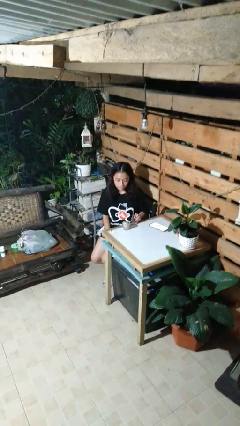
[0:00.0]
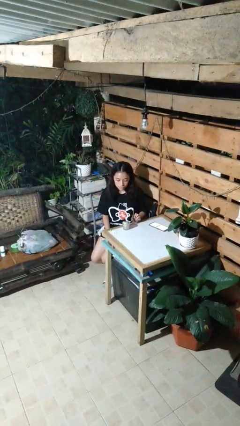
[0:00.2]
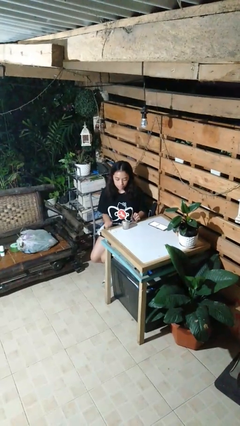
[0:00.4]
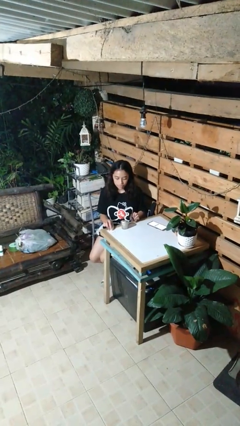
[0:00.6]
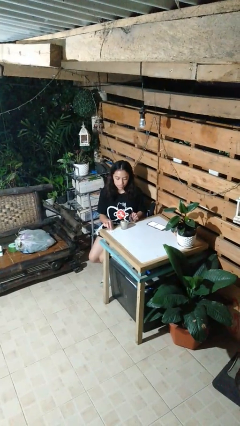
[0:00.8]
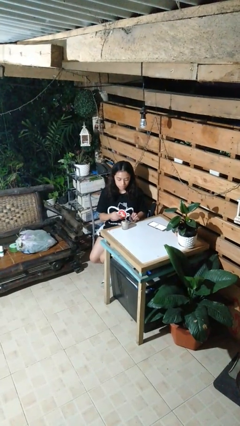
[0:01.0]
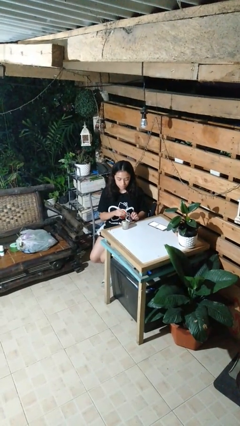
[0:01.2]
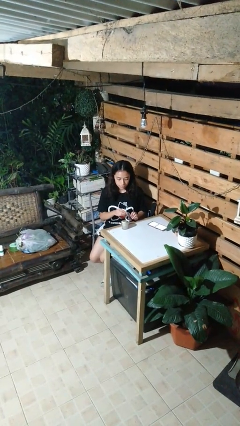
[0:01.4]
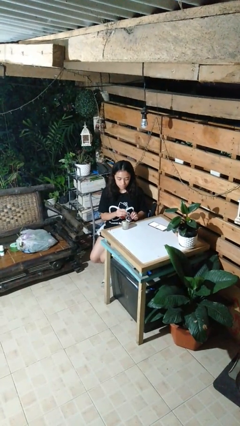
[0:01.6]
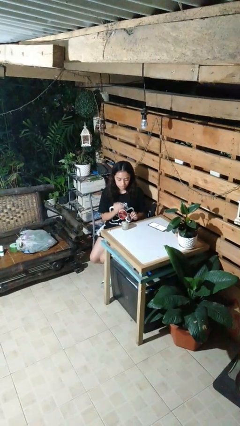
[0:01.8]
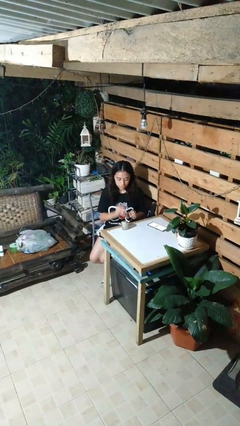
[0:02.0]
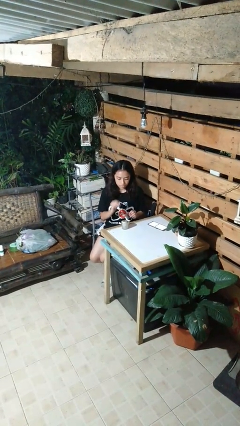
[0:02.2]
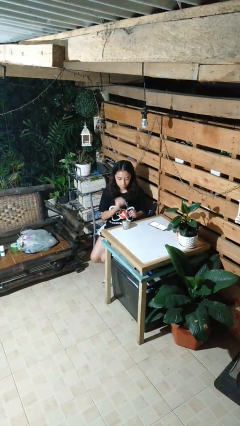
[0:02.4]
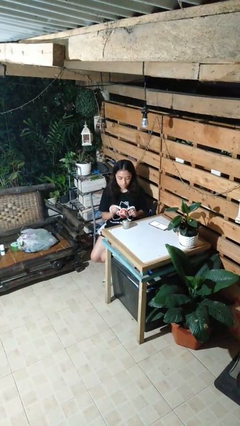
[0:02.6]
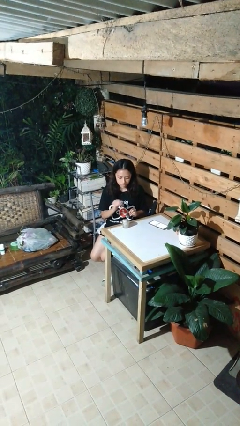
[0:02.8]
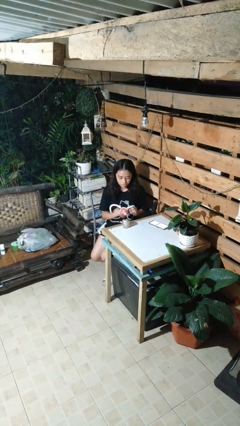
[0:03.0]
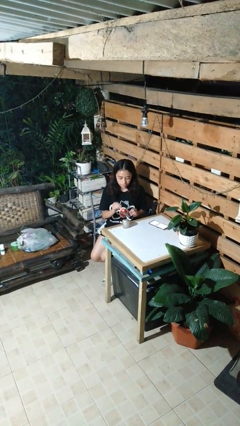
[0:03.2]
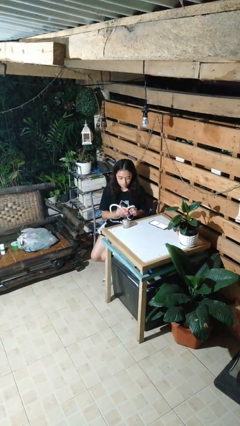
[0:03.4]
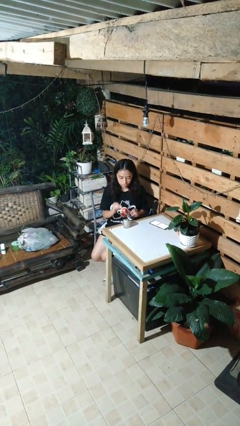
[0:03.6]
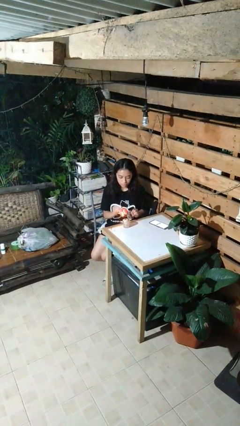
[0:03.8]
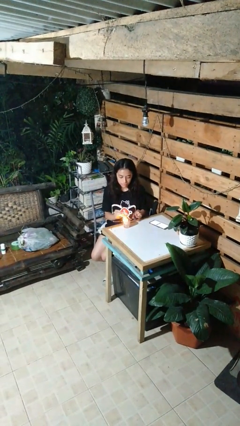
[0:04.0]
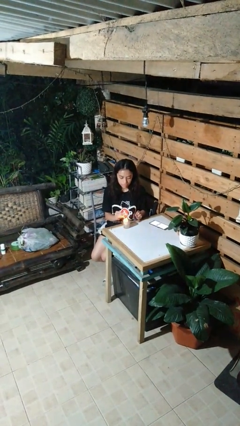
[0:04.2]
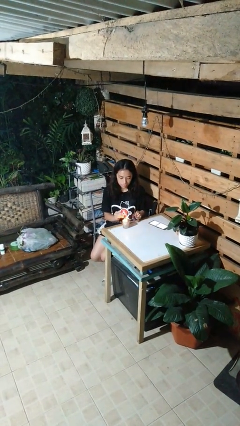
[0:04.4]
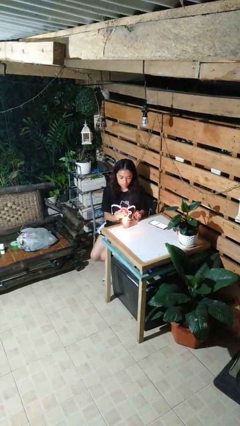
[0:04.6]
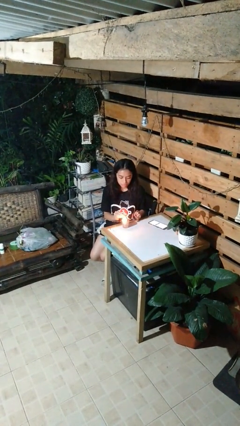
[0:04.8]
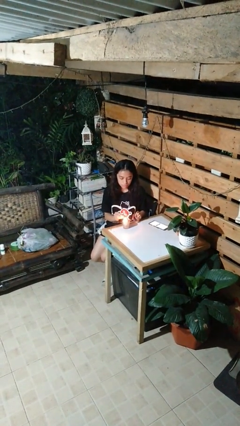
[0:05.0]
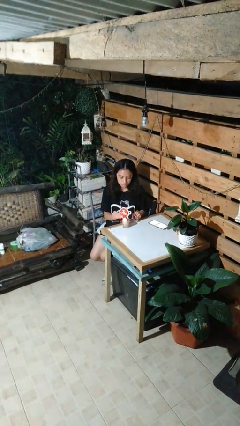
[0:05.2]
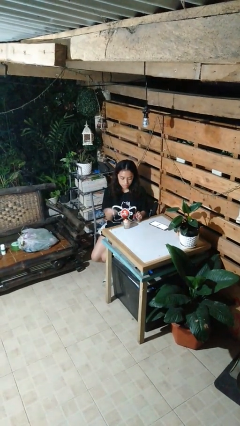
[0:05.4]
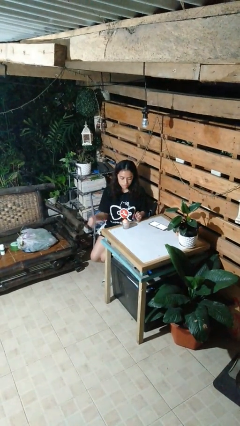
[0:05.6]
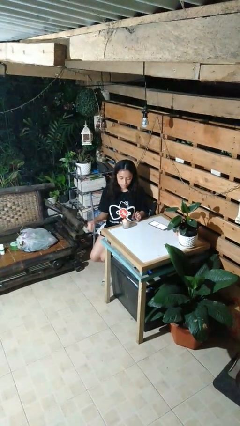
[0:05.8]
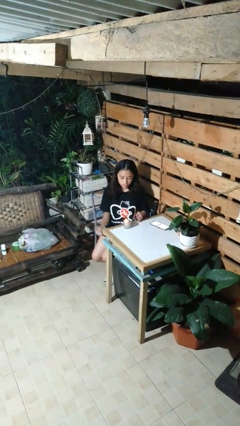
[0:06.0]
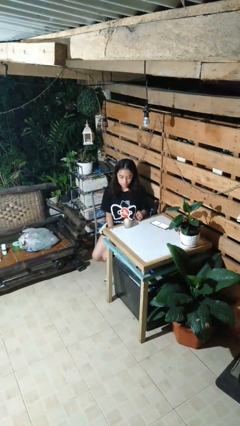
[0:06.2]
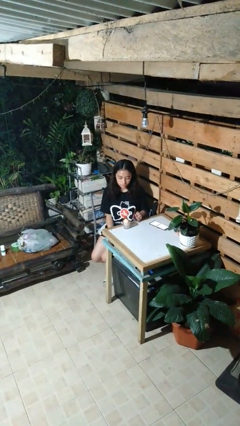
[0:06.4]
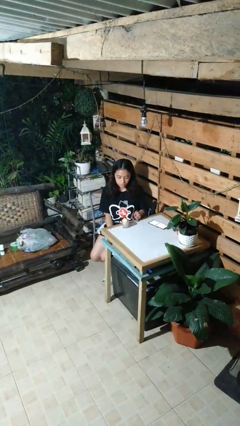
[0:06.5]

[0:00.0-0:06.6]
person lights candle

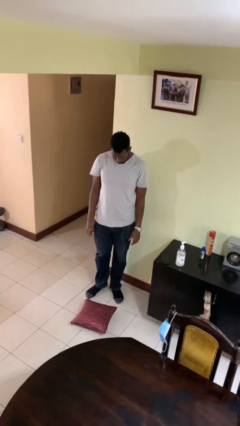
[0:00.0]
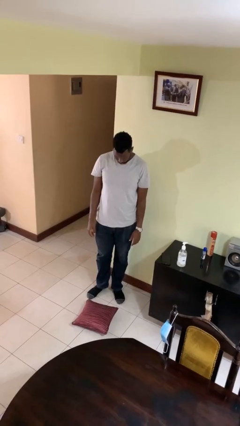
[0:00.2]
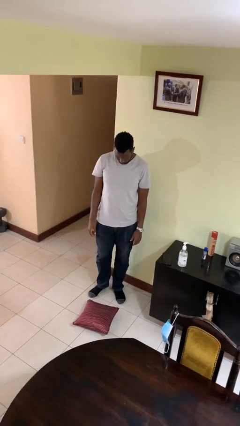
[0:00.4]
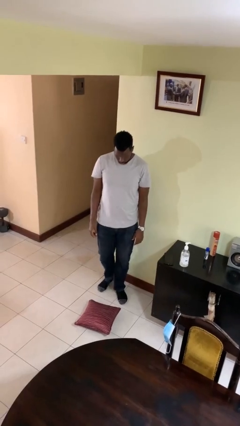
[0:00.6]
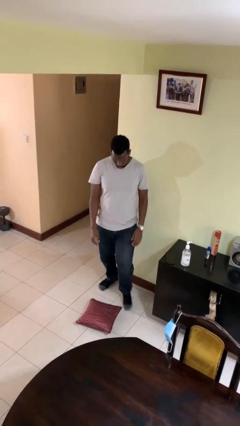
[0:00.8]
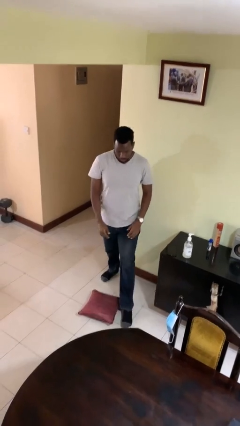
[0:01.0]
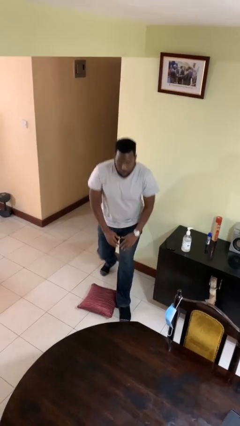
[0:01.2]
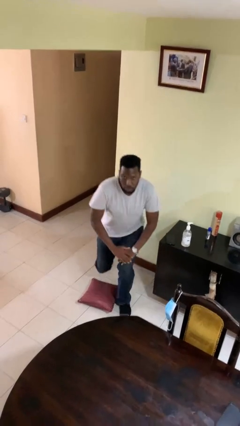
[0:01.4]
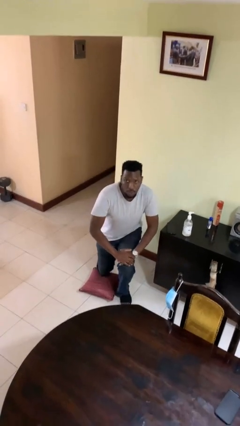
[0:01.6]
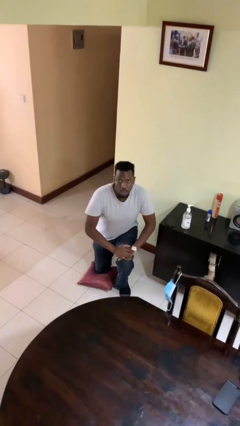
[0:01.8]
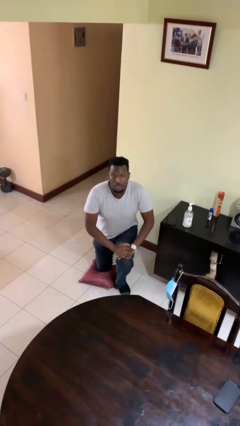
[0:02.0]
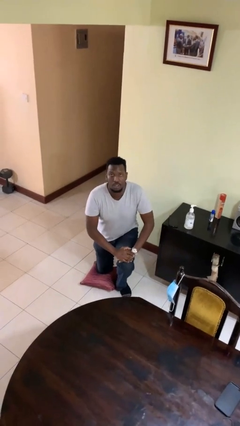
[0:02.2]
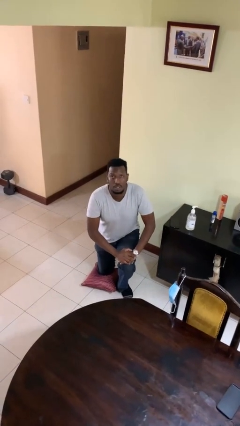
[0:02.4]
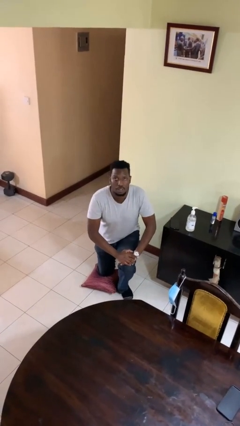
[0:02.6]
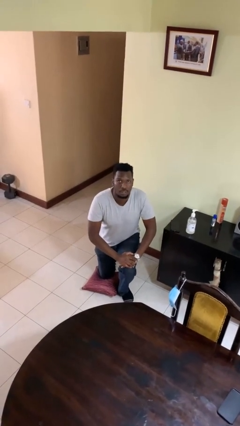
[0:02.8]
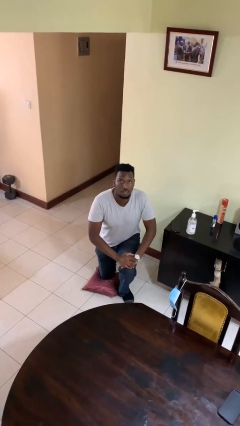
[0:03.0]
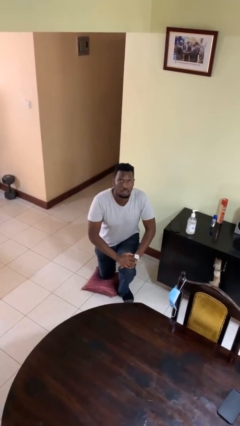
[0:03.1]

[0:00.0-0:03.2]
person kneels

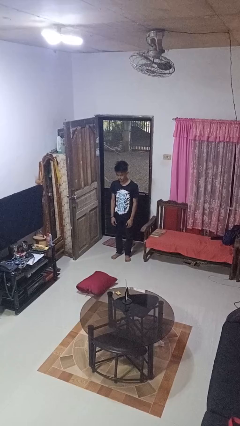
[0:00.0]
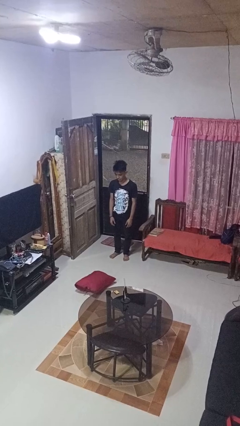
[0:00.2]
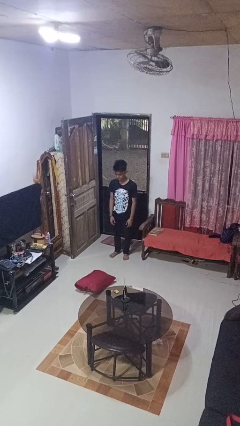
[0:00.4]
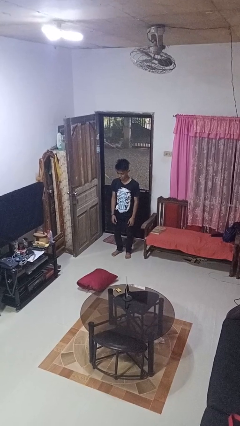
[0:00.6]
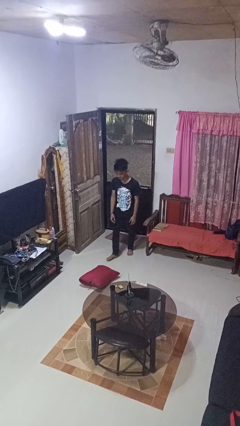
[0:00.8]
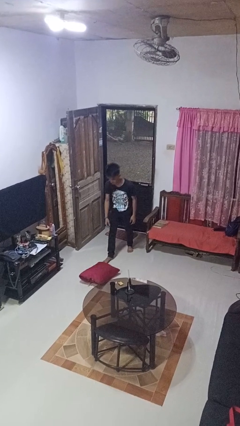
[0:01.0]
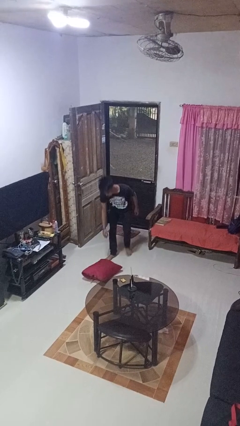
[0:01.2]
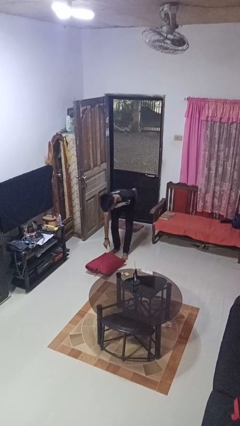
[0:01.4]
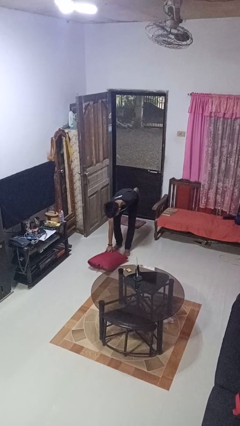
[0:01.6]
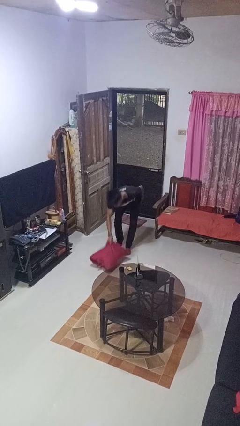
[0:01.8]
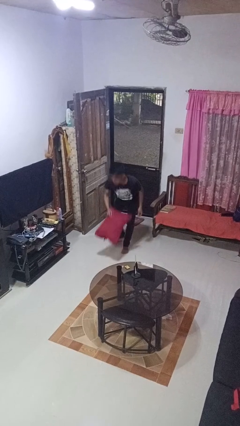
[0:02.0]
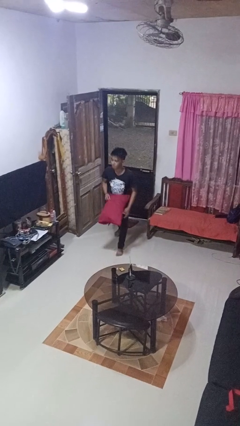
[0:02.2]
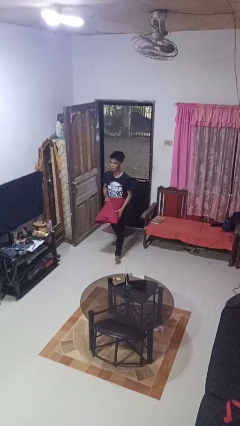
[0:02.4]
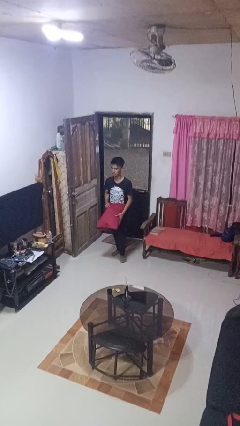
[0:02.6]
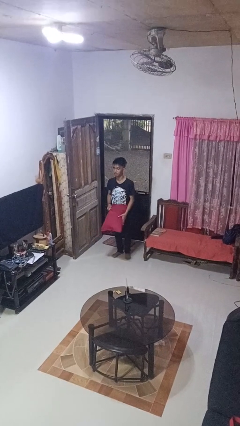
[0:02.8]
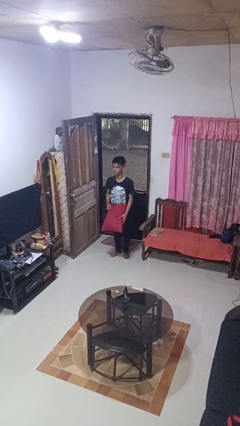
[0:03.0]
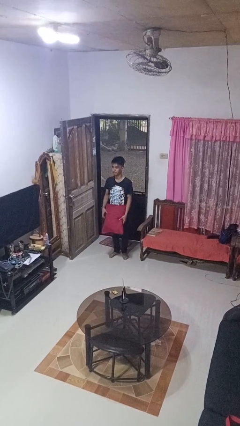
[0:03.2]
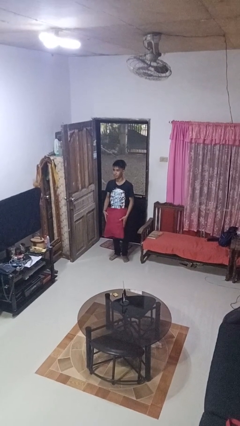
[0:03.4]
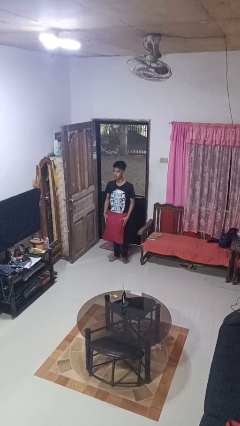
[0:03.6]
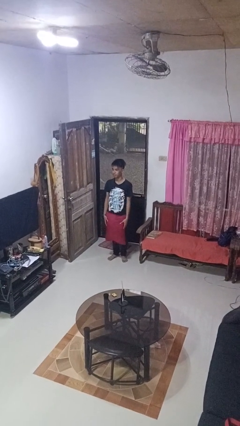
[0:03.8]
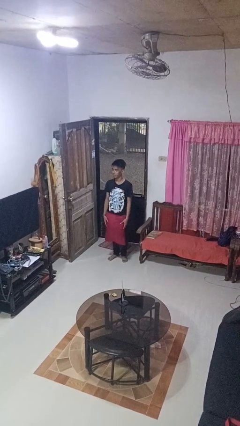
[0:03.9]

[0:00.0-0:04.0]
person picks up object from floor

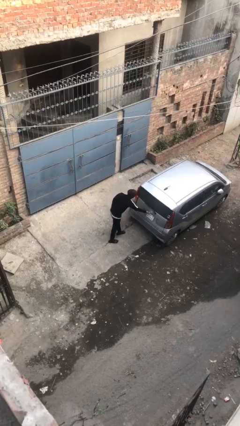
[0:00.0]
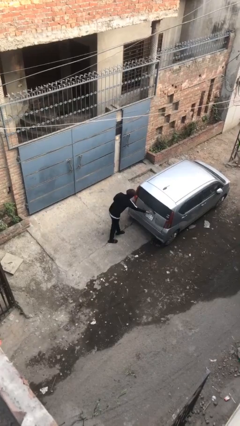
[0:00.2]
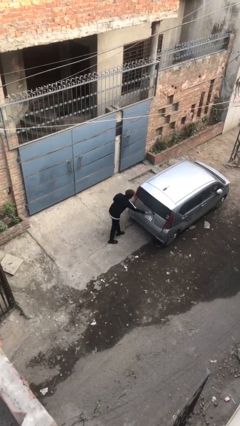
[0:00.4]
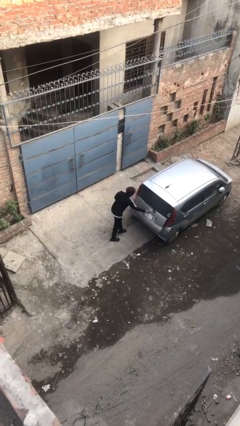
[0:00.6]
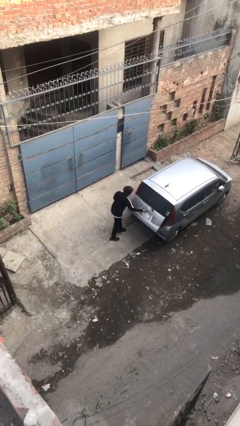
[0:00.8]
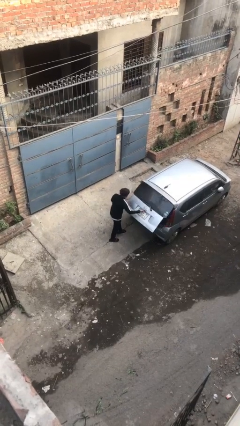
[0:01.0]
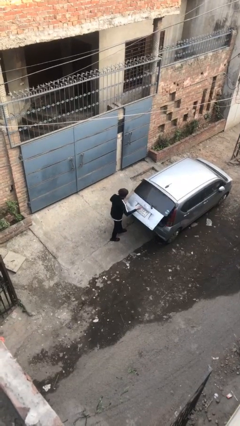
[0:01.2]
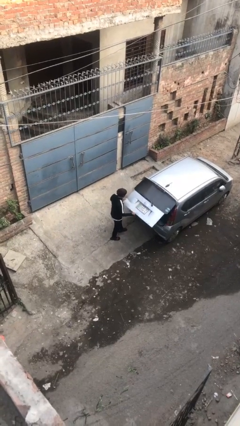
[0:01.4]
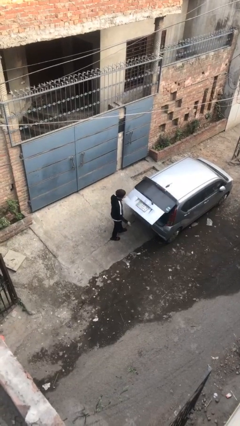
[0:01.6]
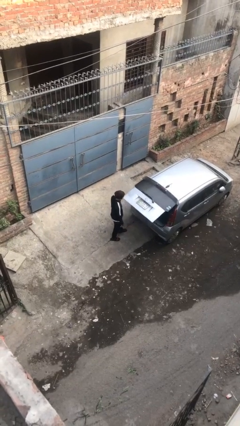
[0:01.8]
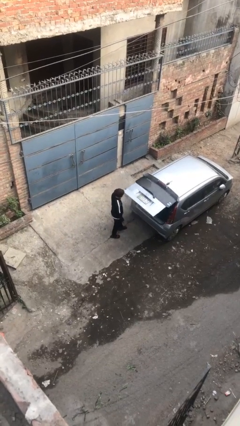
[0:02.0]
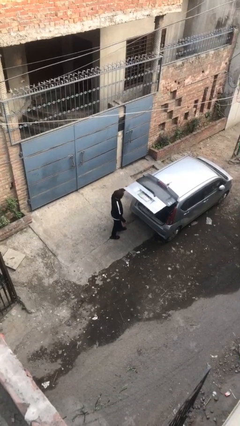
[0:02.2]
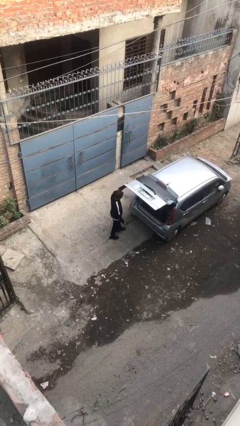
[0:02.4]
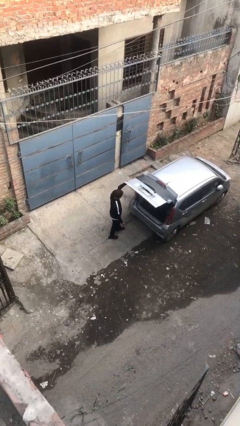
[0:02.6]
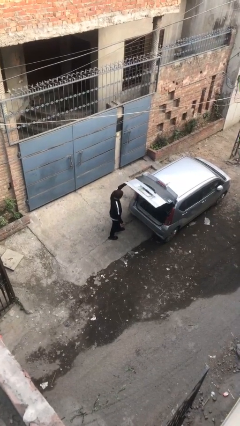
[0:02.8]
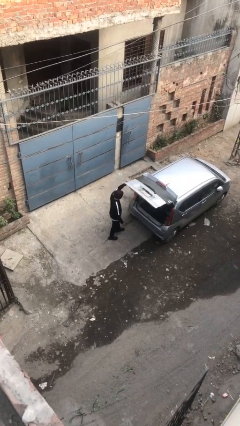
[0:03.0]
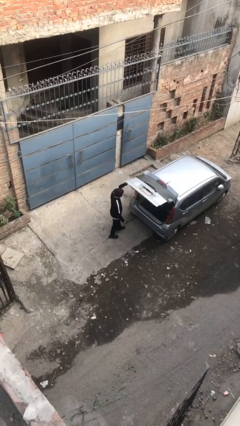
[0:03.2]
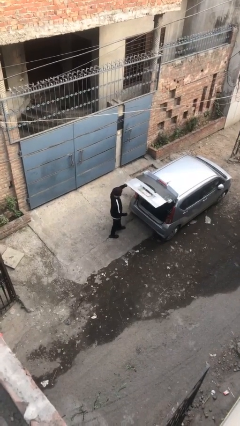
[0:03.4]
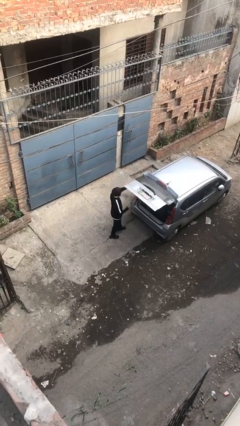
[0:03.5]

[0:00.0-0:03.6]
person opens car trunk

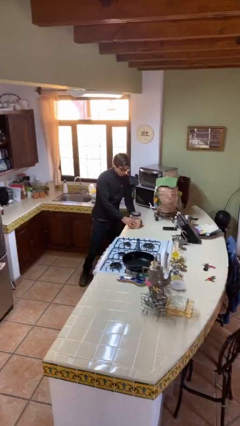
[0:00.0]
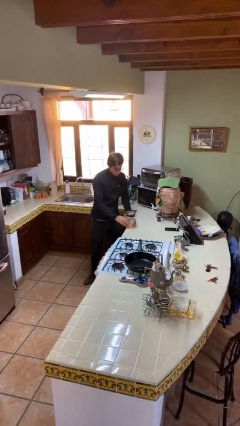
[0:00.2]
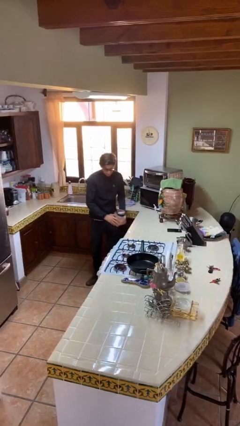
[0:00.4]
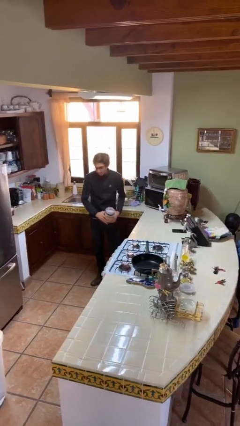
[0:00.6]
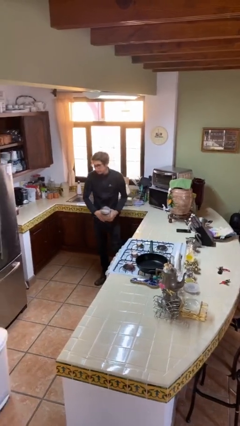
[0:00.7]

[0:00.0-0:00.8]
person picks up object from table
